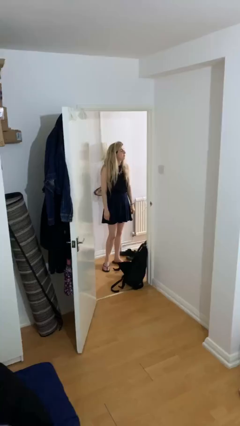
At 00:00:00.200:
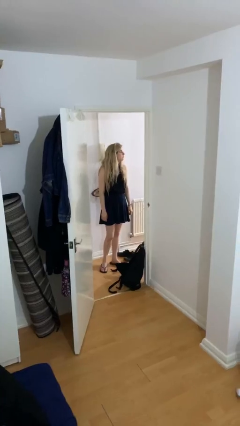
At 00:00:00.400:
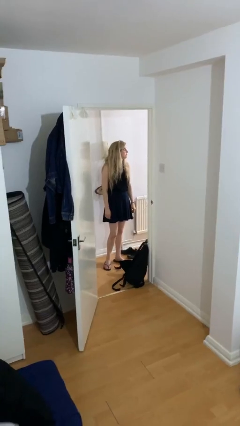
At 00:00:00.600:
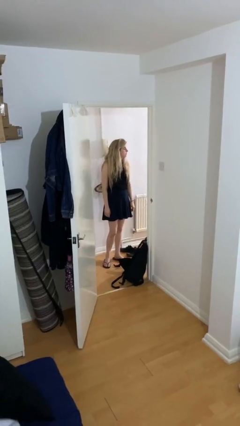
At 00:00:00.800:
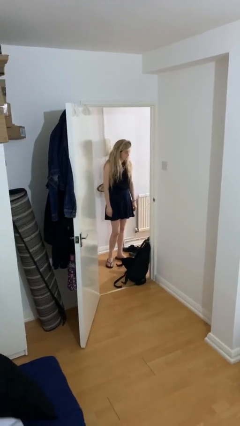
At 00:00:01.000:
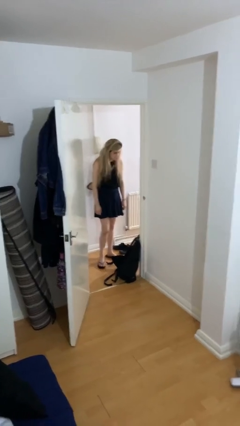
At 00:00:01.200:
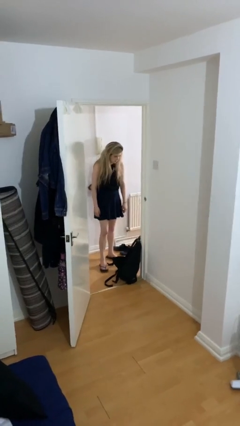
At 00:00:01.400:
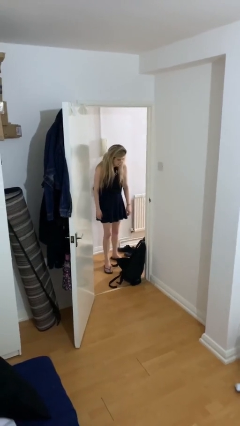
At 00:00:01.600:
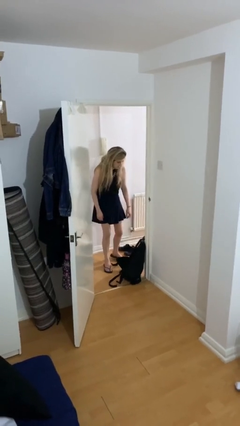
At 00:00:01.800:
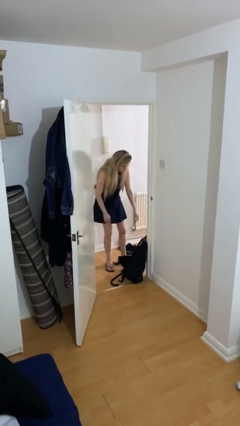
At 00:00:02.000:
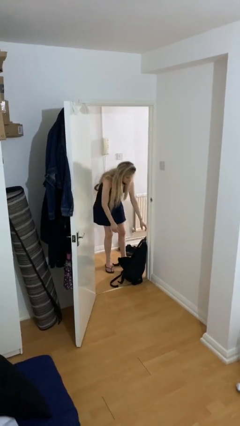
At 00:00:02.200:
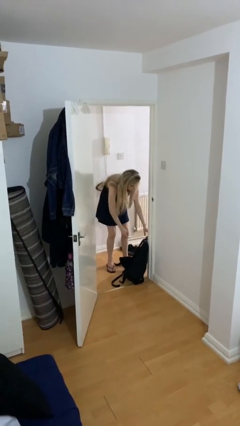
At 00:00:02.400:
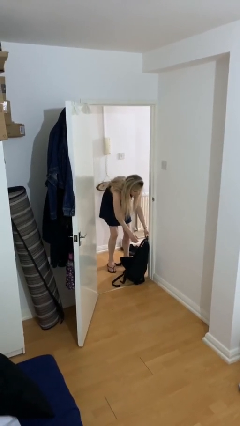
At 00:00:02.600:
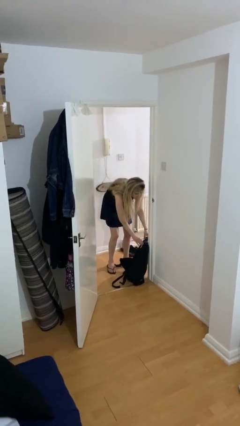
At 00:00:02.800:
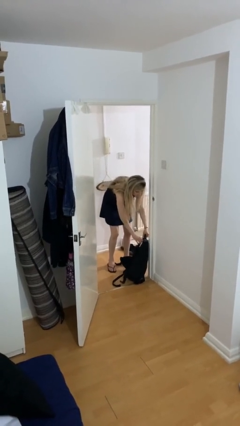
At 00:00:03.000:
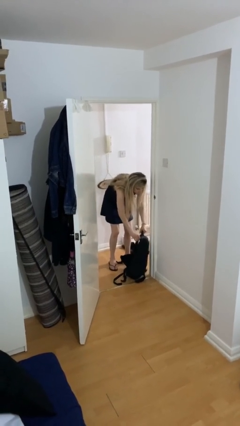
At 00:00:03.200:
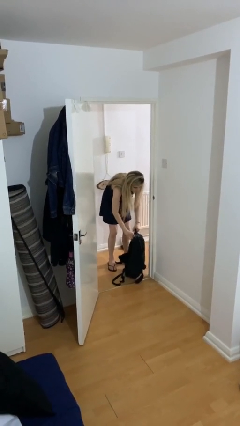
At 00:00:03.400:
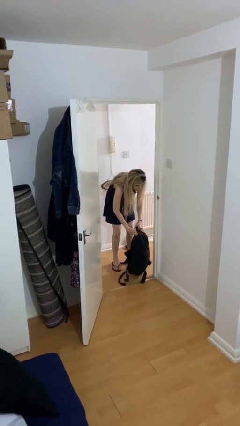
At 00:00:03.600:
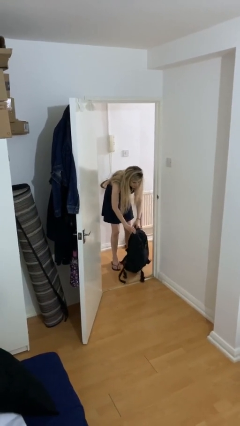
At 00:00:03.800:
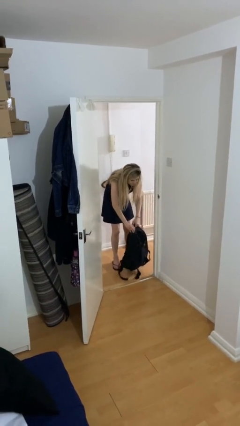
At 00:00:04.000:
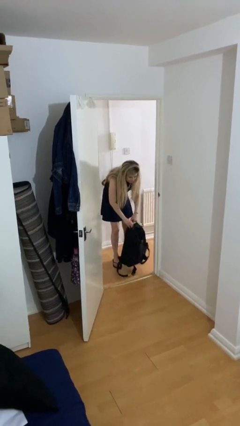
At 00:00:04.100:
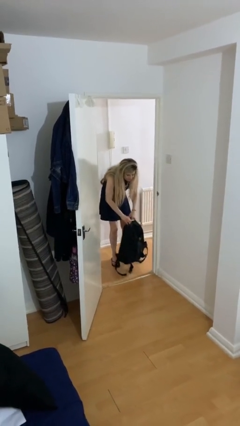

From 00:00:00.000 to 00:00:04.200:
person picks up object from floor

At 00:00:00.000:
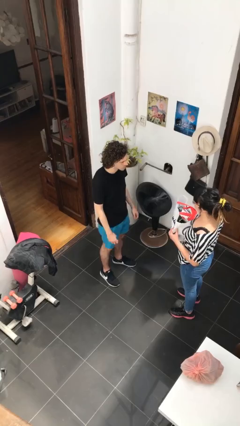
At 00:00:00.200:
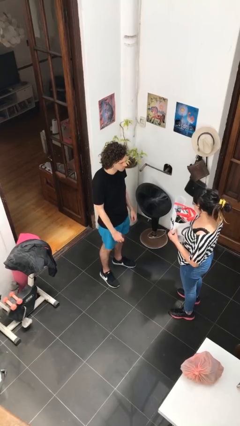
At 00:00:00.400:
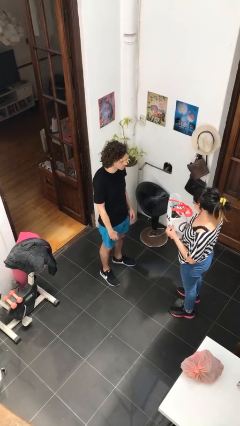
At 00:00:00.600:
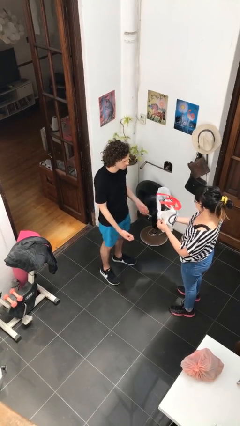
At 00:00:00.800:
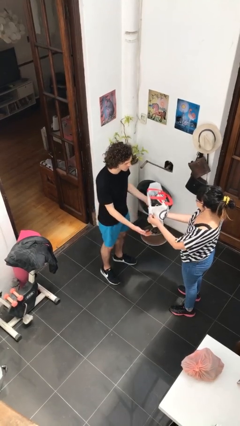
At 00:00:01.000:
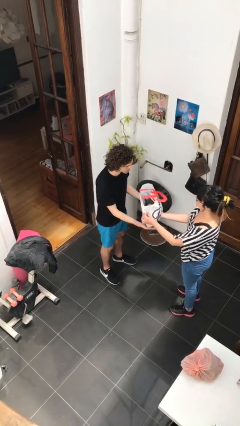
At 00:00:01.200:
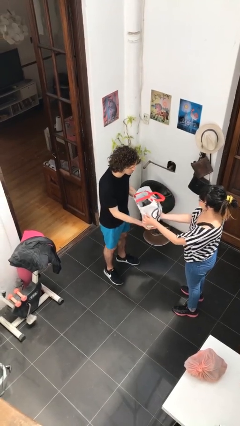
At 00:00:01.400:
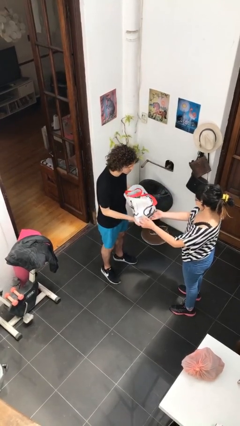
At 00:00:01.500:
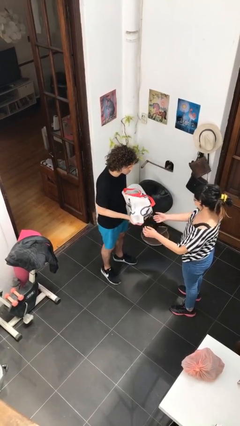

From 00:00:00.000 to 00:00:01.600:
person transfers object to person

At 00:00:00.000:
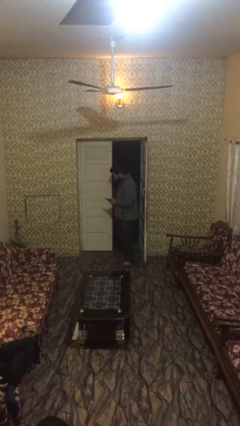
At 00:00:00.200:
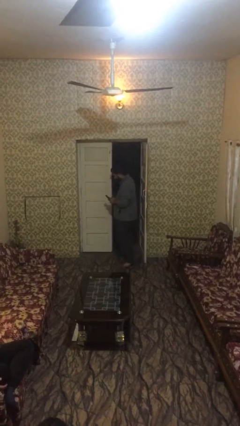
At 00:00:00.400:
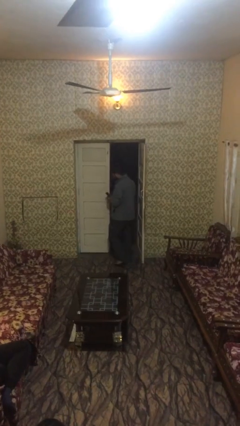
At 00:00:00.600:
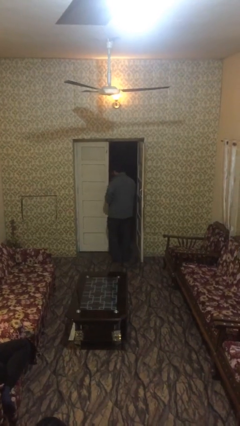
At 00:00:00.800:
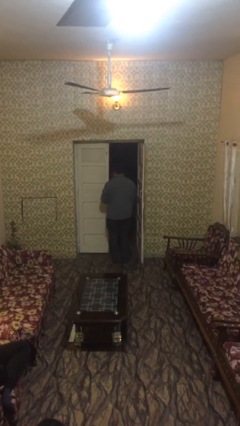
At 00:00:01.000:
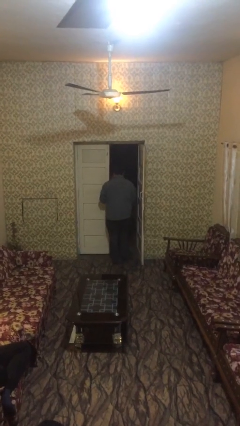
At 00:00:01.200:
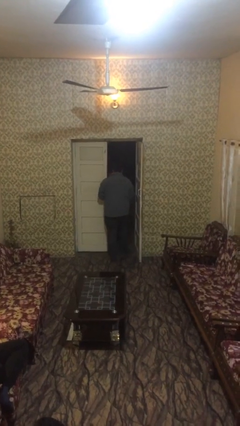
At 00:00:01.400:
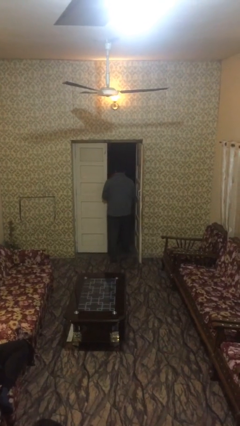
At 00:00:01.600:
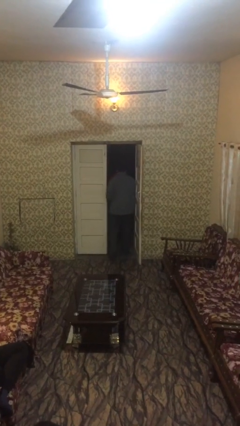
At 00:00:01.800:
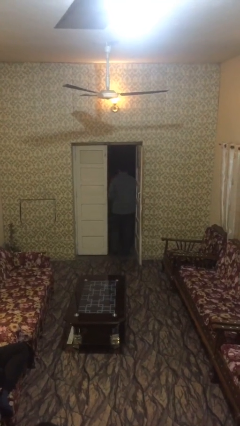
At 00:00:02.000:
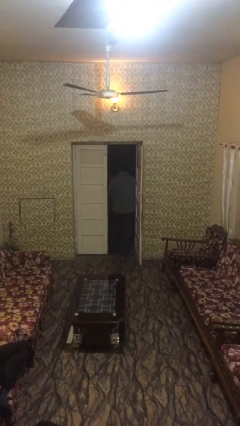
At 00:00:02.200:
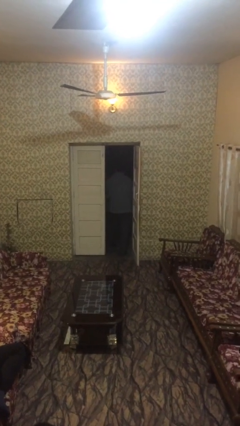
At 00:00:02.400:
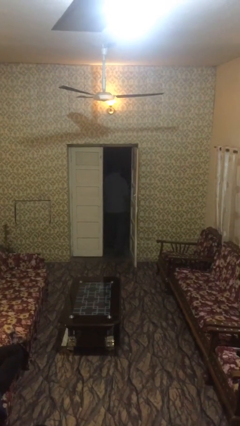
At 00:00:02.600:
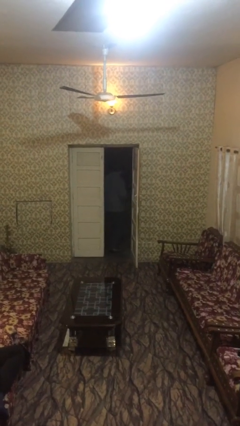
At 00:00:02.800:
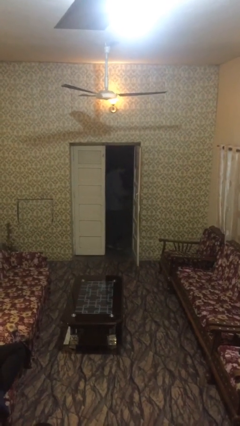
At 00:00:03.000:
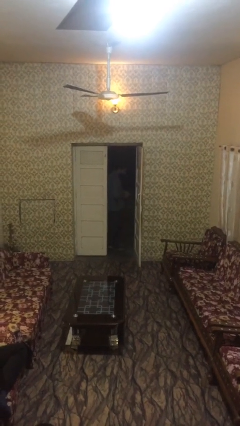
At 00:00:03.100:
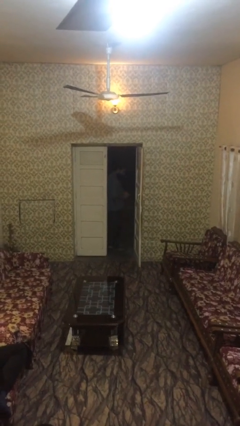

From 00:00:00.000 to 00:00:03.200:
person exits scene through structure

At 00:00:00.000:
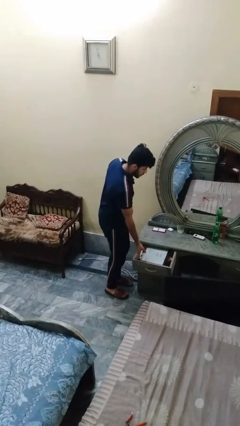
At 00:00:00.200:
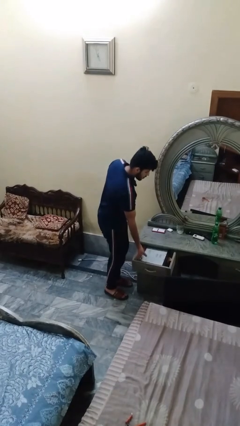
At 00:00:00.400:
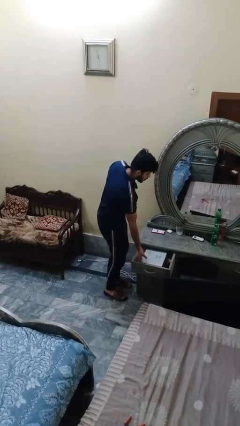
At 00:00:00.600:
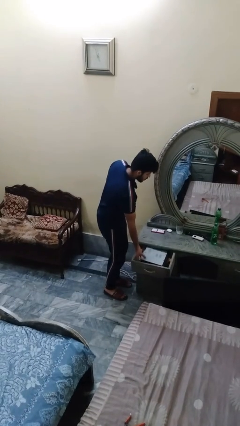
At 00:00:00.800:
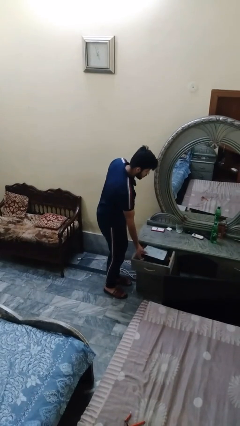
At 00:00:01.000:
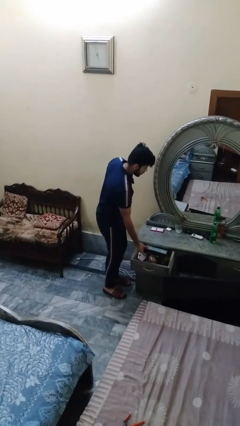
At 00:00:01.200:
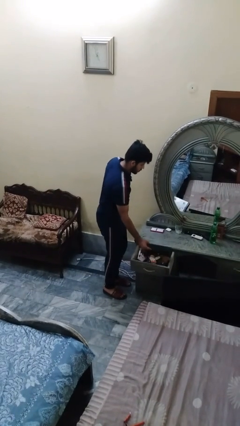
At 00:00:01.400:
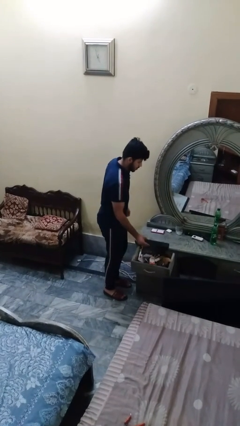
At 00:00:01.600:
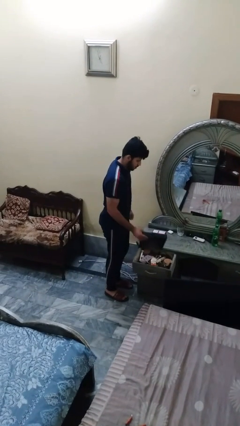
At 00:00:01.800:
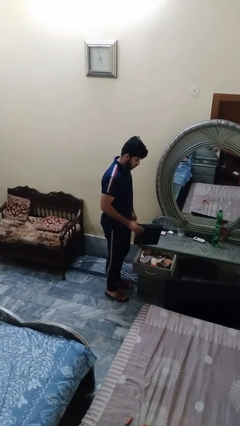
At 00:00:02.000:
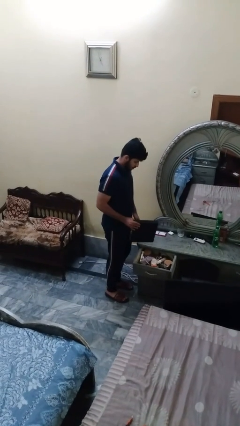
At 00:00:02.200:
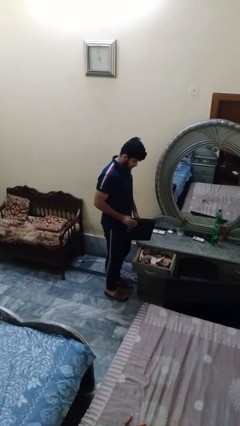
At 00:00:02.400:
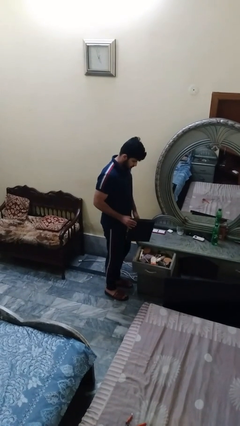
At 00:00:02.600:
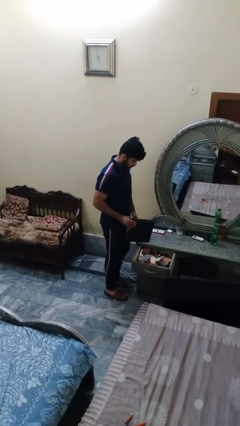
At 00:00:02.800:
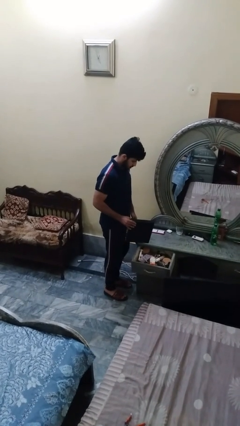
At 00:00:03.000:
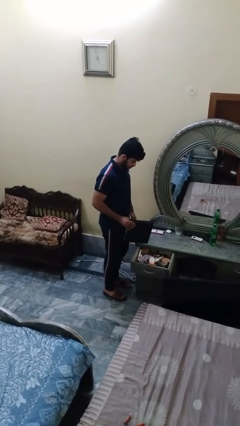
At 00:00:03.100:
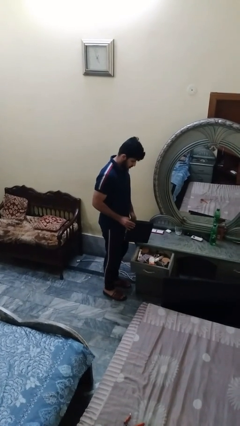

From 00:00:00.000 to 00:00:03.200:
person picks up object from cabinet

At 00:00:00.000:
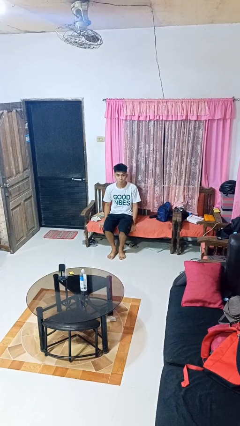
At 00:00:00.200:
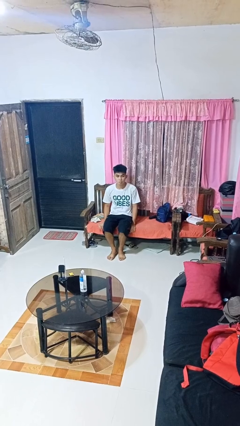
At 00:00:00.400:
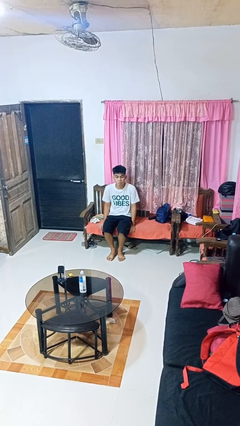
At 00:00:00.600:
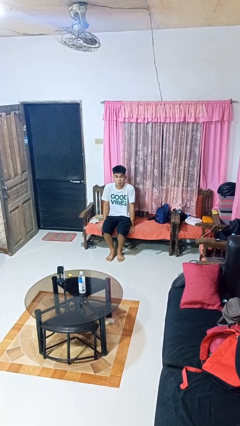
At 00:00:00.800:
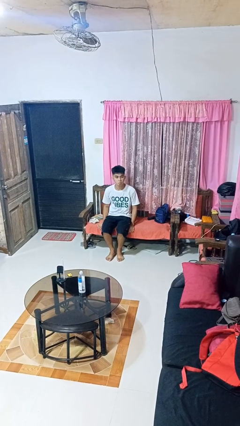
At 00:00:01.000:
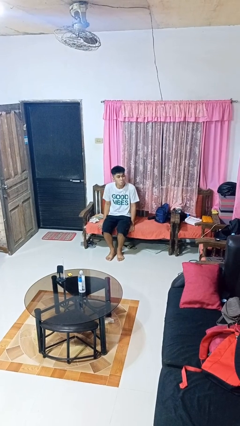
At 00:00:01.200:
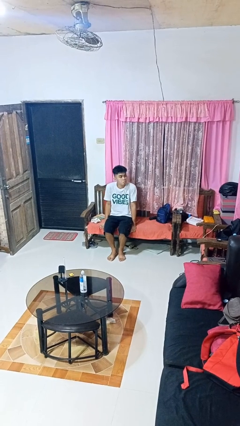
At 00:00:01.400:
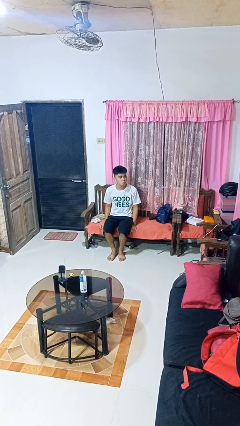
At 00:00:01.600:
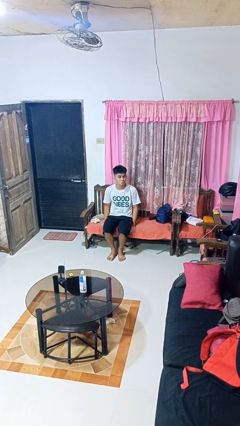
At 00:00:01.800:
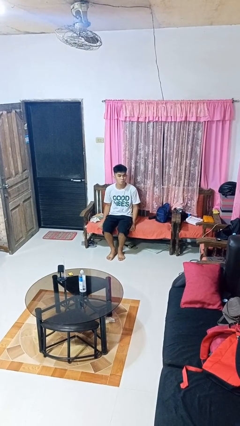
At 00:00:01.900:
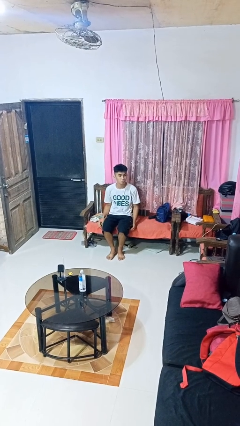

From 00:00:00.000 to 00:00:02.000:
person shrugs

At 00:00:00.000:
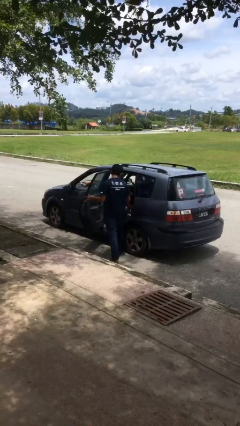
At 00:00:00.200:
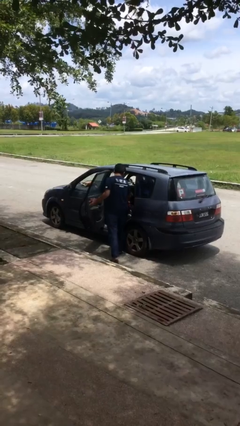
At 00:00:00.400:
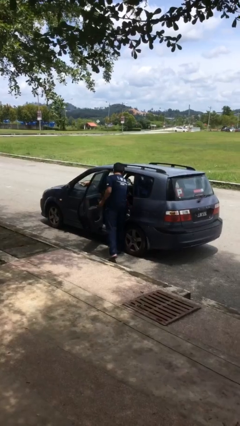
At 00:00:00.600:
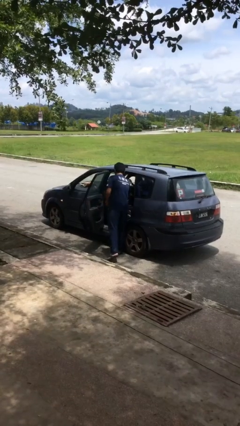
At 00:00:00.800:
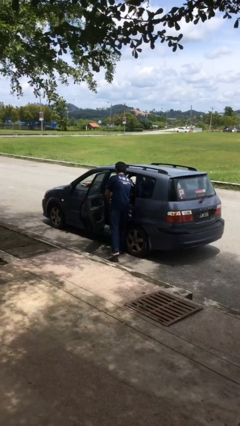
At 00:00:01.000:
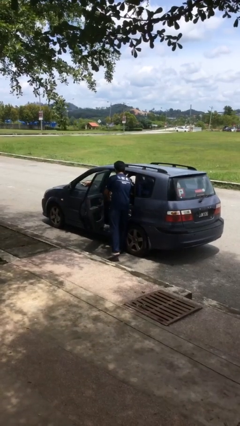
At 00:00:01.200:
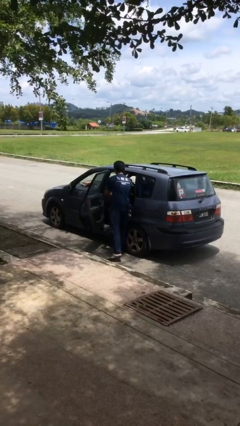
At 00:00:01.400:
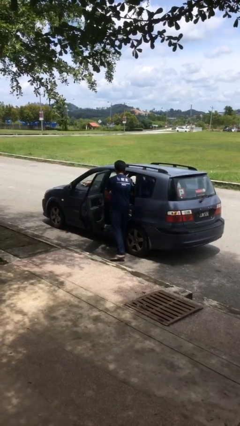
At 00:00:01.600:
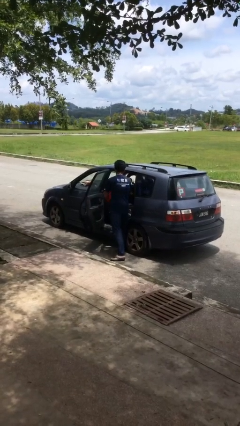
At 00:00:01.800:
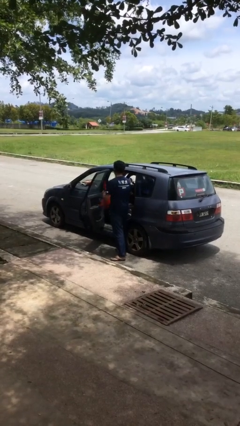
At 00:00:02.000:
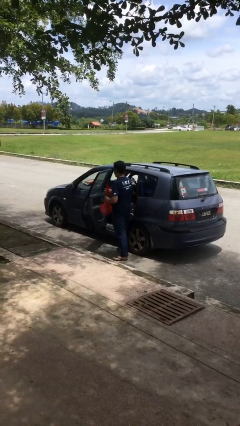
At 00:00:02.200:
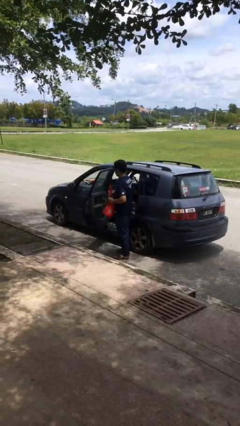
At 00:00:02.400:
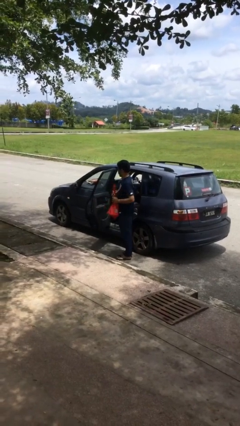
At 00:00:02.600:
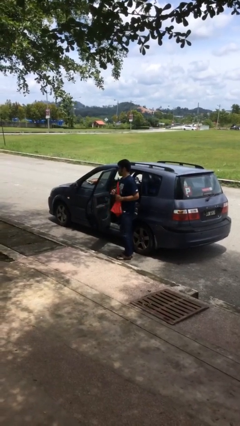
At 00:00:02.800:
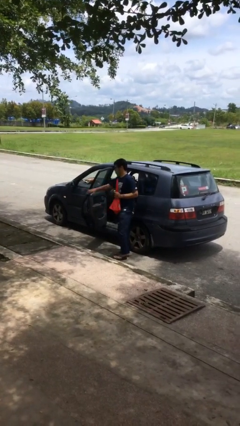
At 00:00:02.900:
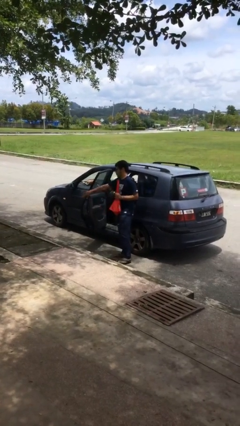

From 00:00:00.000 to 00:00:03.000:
person unloads car
